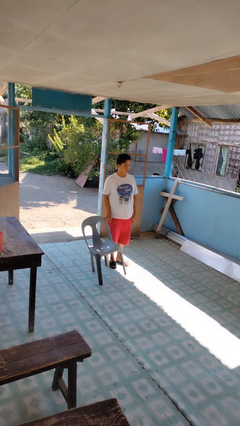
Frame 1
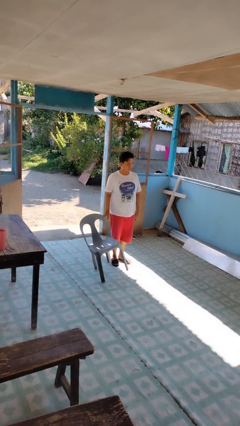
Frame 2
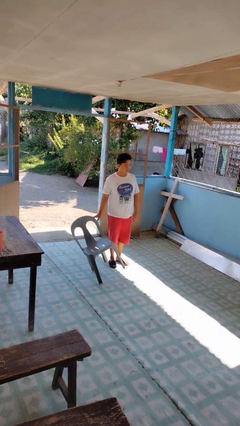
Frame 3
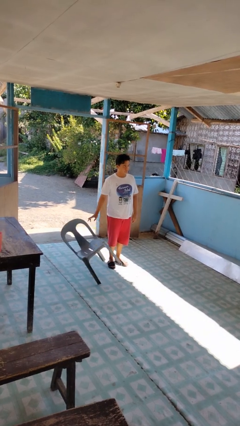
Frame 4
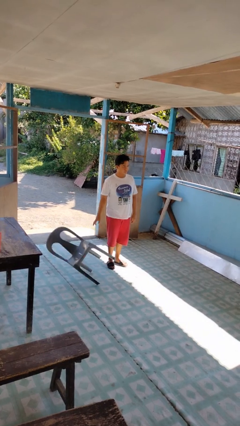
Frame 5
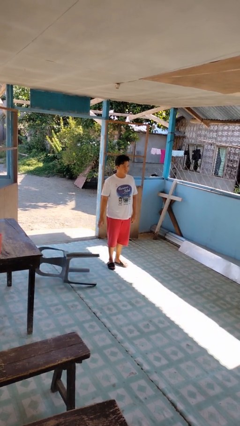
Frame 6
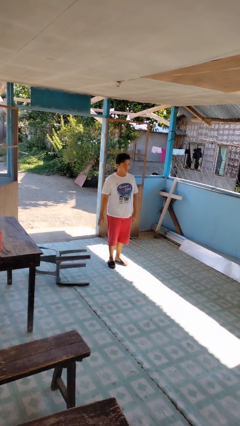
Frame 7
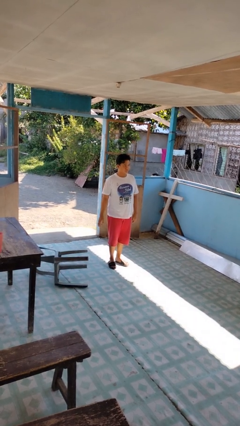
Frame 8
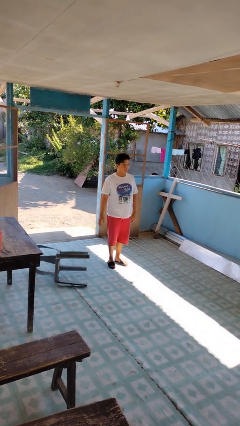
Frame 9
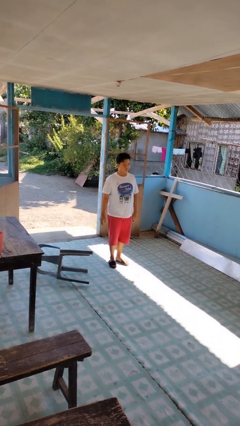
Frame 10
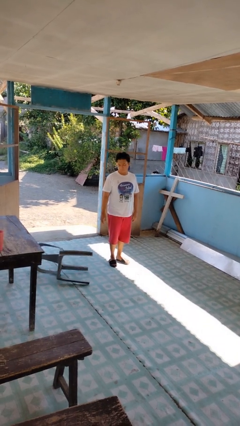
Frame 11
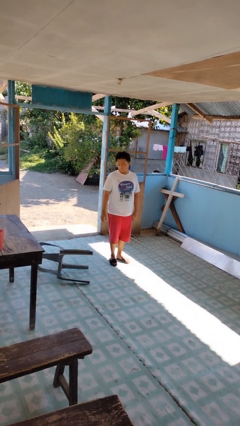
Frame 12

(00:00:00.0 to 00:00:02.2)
person knocks over furniture

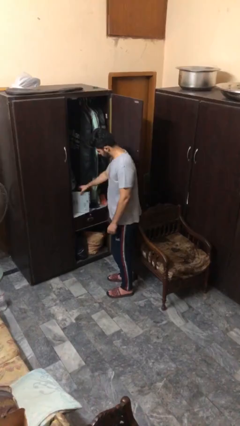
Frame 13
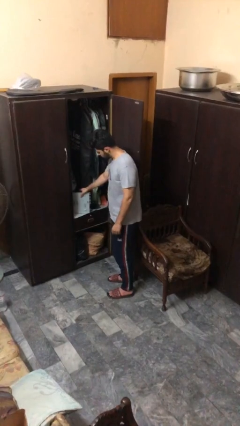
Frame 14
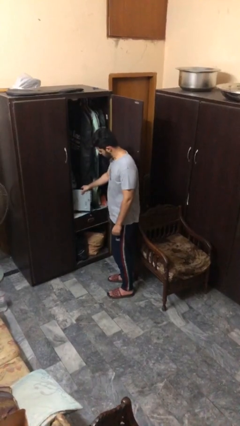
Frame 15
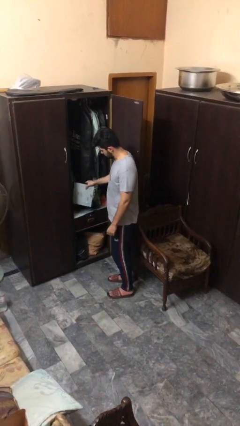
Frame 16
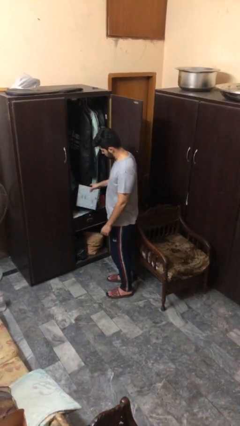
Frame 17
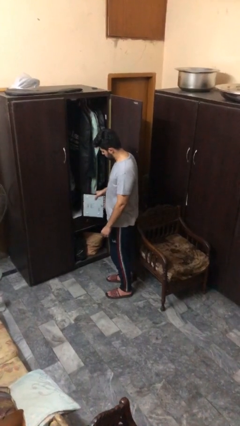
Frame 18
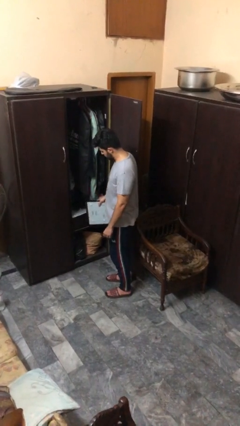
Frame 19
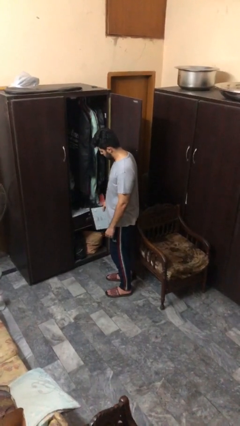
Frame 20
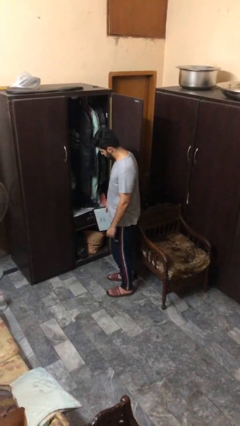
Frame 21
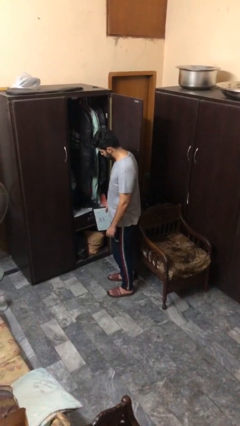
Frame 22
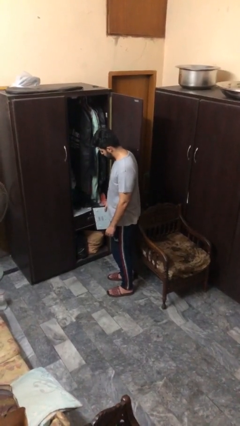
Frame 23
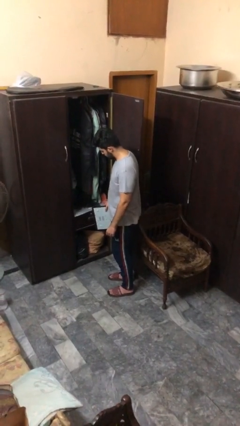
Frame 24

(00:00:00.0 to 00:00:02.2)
person picks up object from cabinet

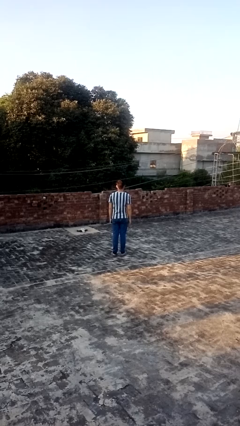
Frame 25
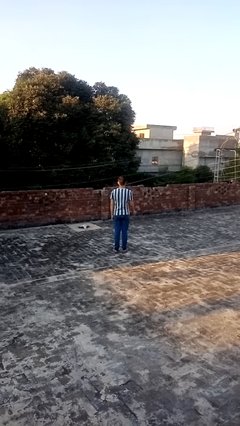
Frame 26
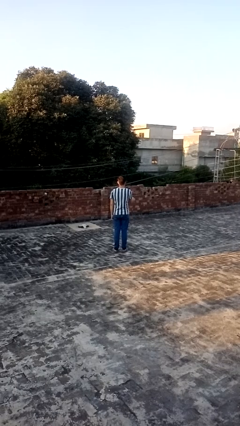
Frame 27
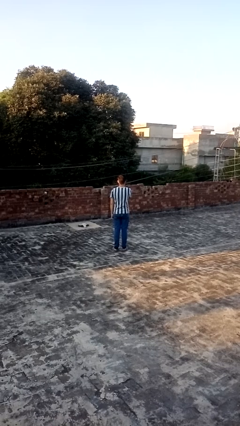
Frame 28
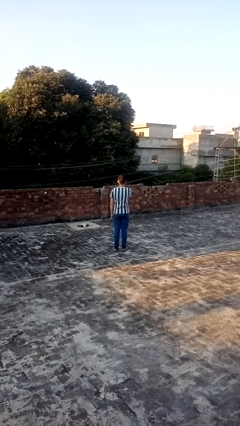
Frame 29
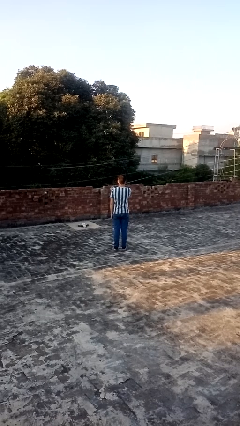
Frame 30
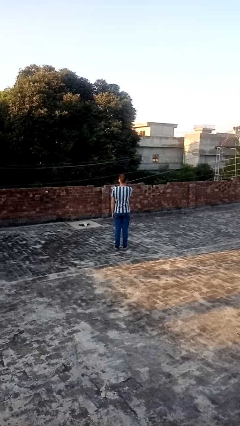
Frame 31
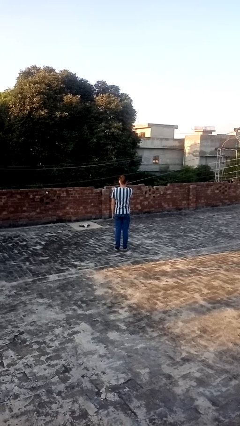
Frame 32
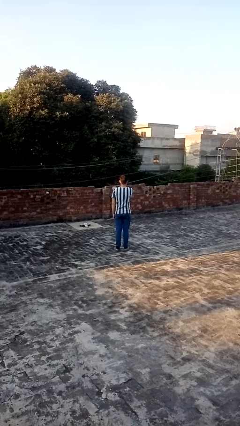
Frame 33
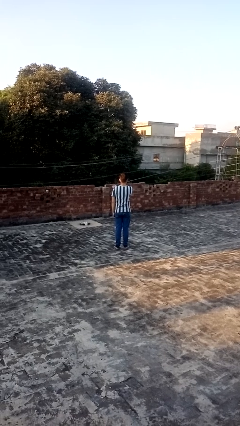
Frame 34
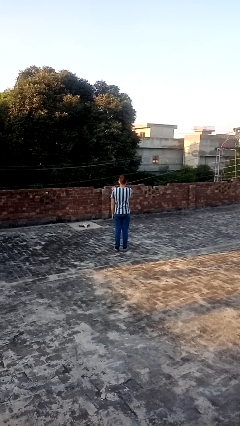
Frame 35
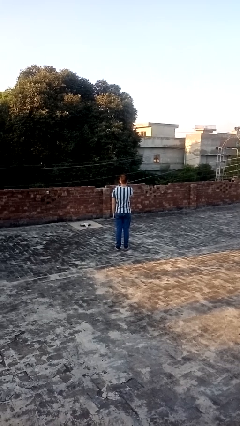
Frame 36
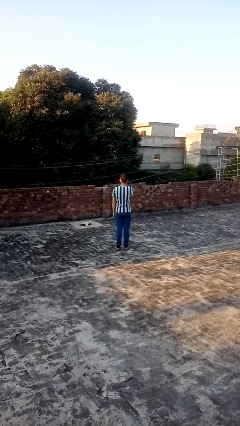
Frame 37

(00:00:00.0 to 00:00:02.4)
person gestures swipe left

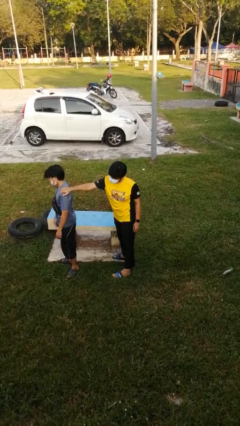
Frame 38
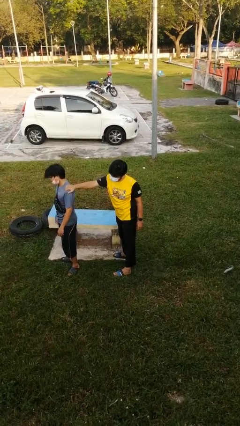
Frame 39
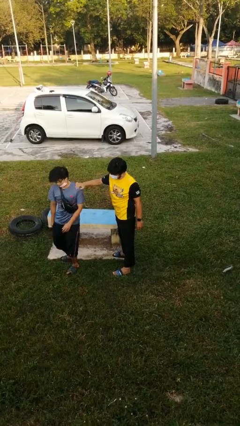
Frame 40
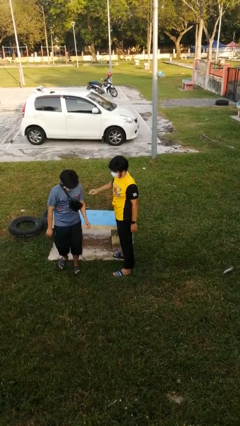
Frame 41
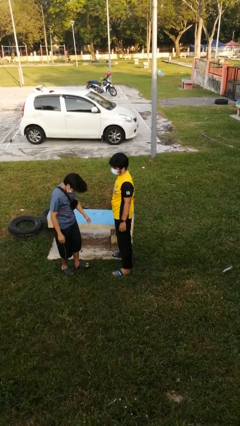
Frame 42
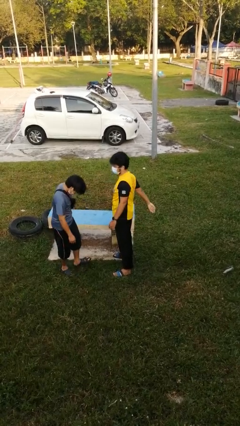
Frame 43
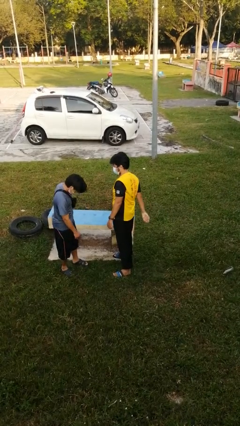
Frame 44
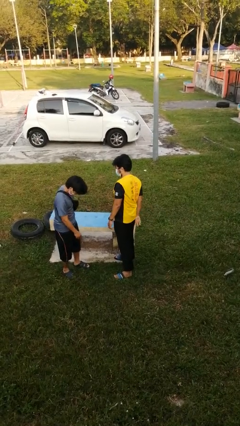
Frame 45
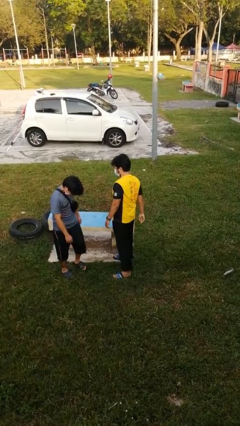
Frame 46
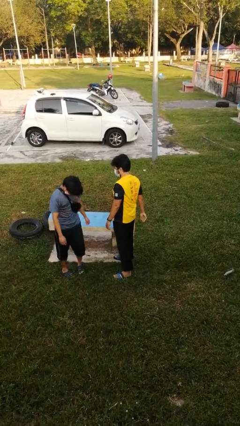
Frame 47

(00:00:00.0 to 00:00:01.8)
person spins person around

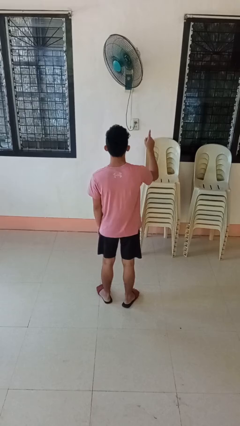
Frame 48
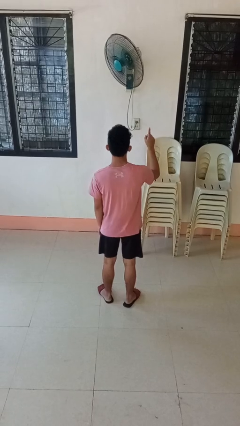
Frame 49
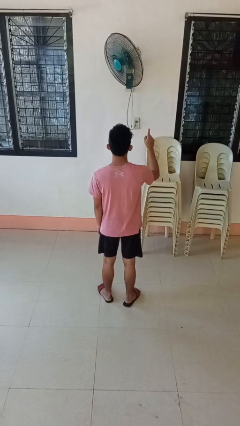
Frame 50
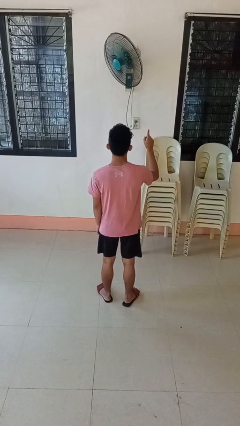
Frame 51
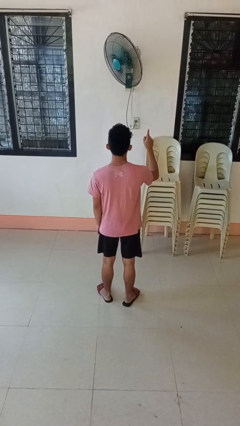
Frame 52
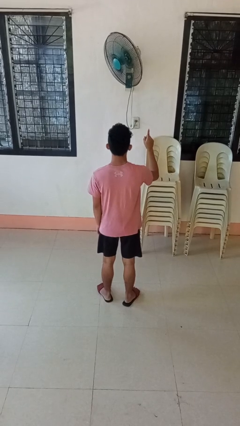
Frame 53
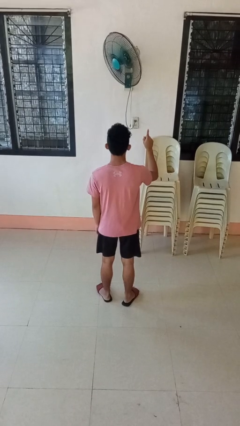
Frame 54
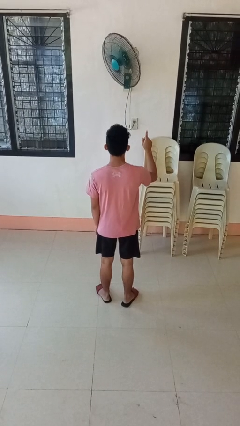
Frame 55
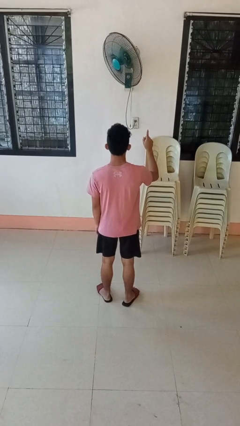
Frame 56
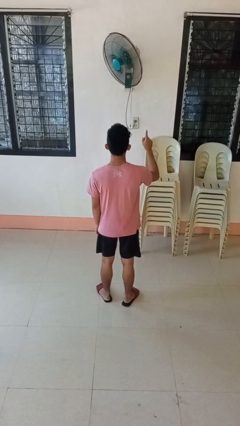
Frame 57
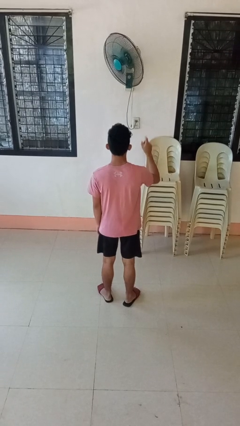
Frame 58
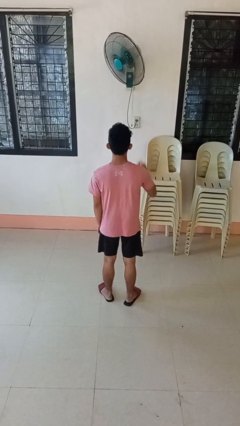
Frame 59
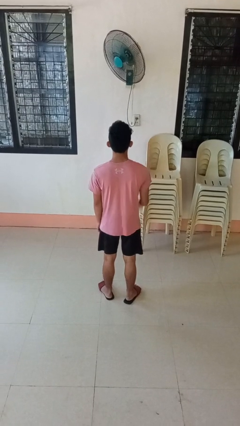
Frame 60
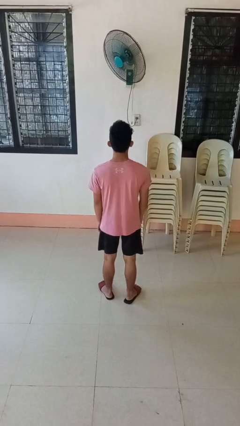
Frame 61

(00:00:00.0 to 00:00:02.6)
person gestures number one

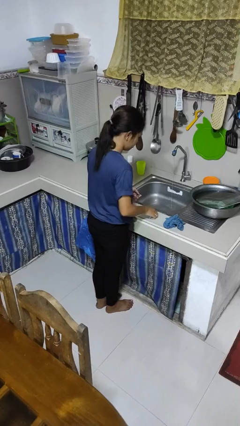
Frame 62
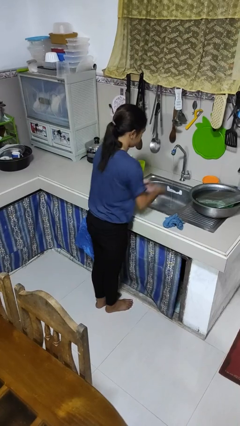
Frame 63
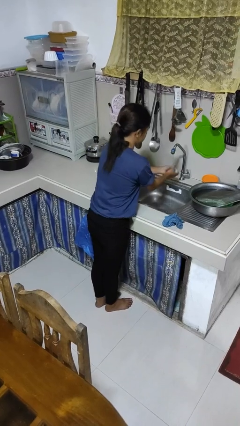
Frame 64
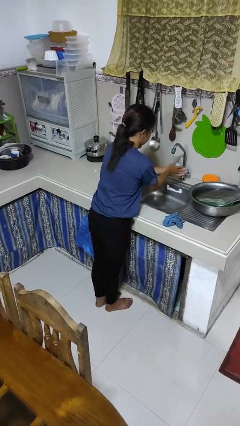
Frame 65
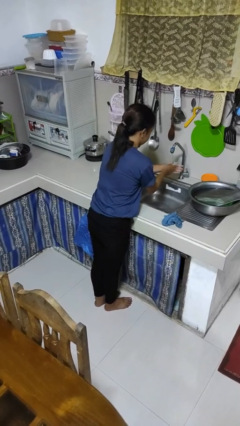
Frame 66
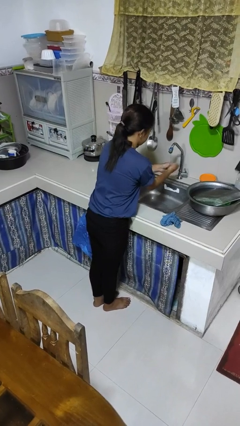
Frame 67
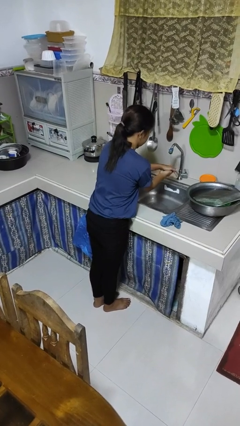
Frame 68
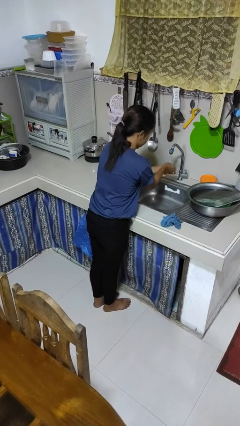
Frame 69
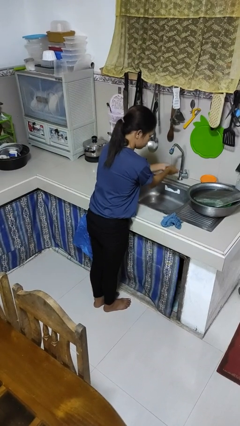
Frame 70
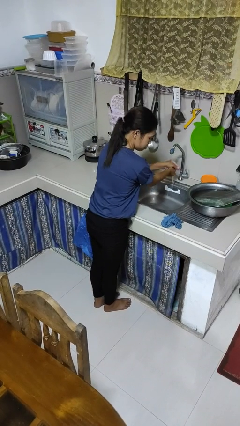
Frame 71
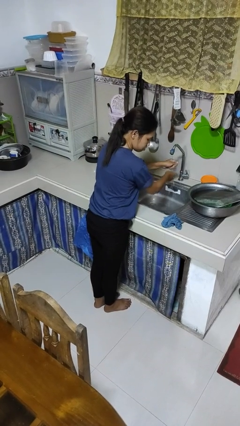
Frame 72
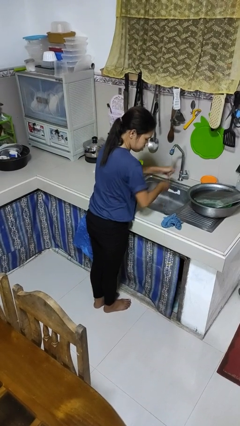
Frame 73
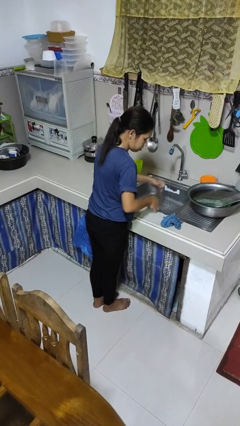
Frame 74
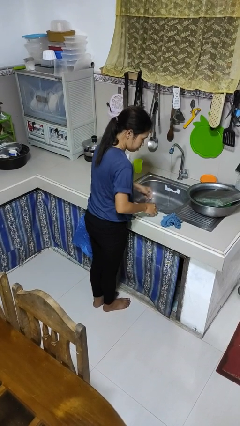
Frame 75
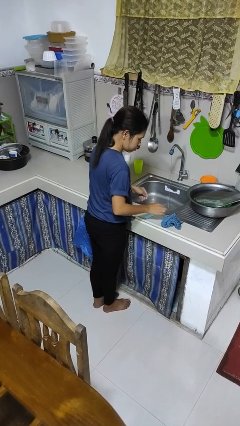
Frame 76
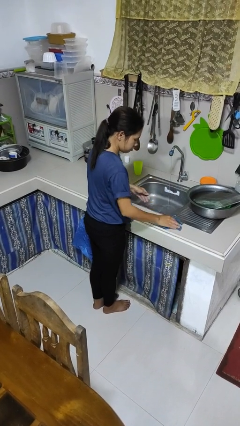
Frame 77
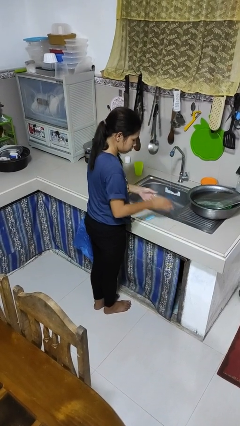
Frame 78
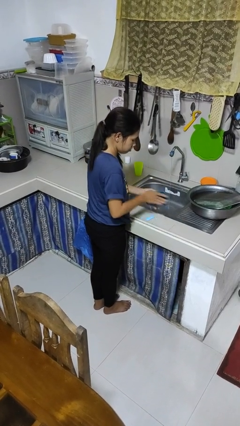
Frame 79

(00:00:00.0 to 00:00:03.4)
person washes hands

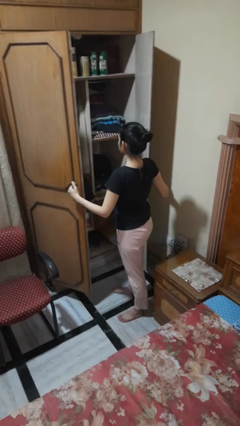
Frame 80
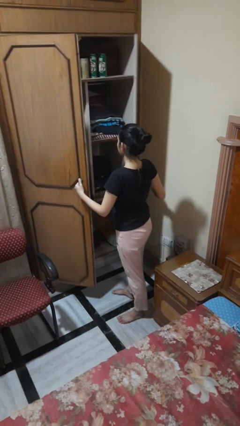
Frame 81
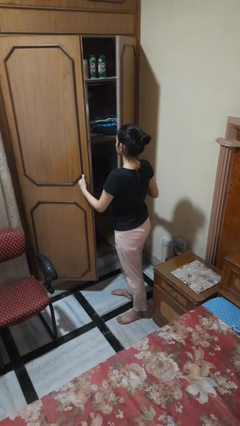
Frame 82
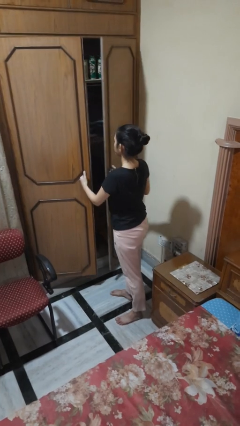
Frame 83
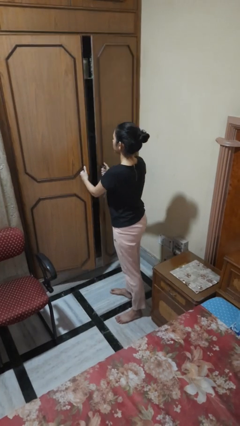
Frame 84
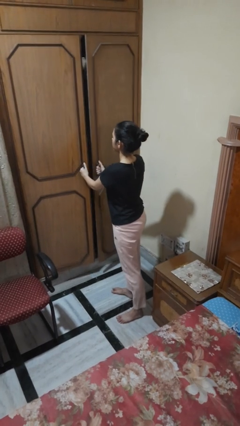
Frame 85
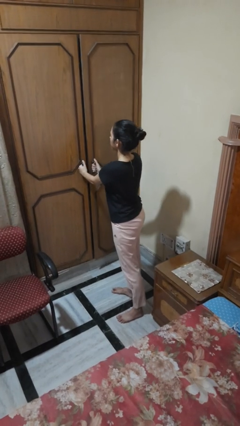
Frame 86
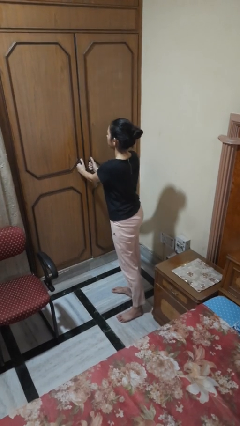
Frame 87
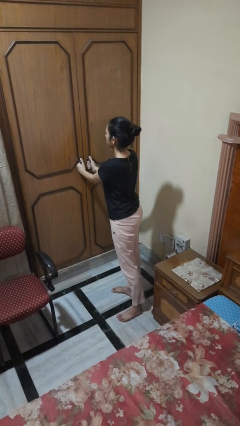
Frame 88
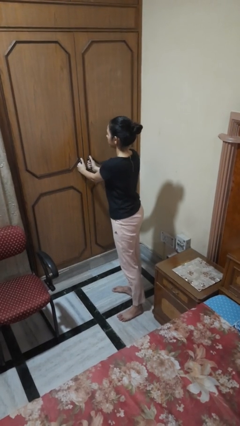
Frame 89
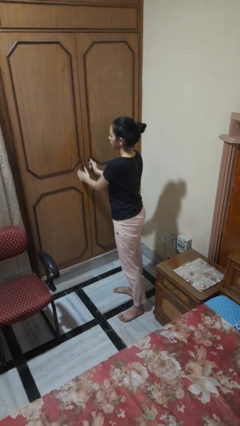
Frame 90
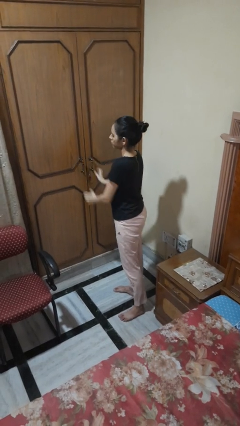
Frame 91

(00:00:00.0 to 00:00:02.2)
person closes closet door
